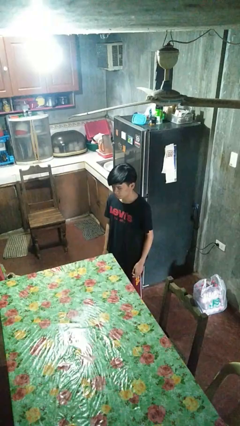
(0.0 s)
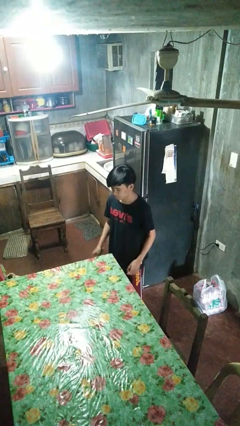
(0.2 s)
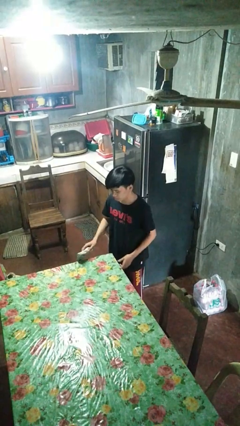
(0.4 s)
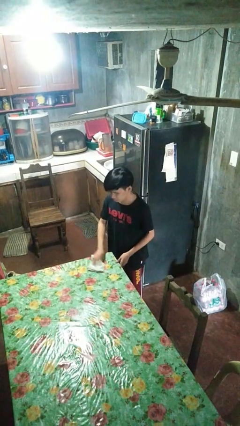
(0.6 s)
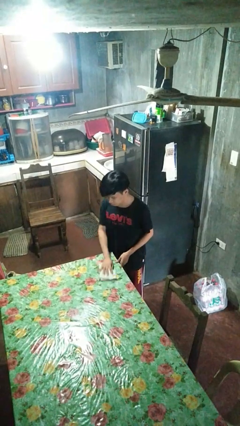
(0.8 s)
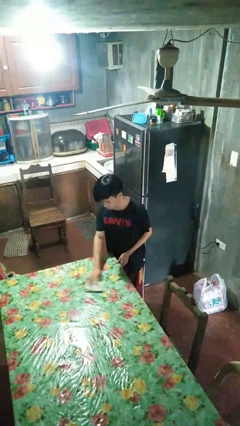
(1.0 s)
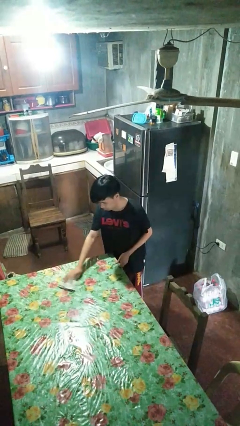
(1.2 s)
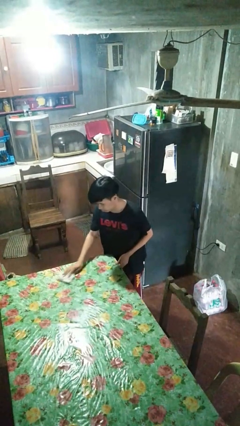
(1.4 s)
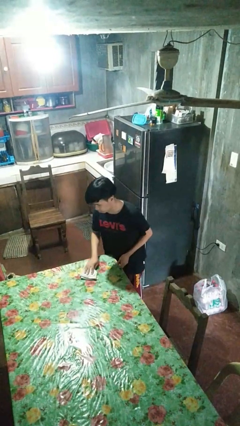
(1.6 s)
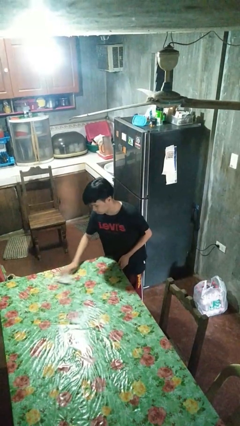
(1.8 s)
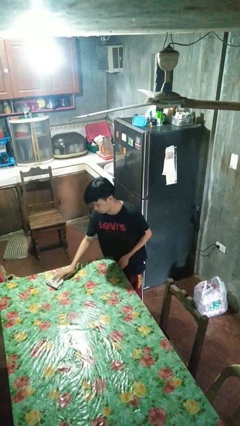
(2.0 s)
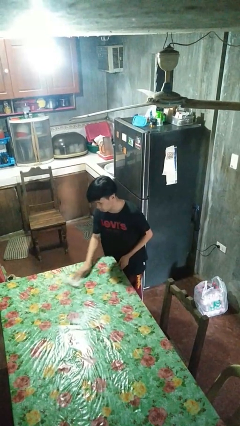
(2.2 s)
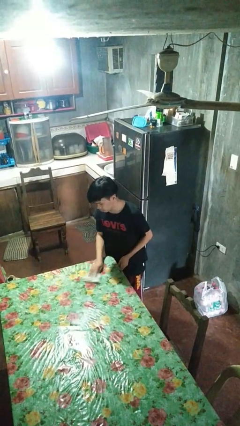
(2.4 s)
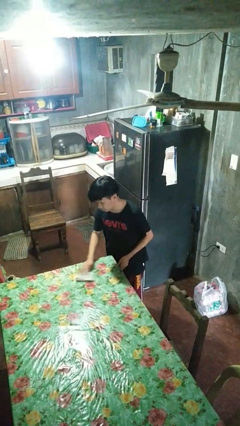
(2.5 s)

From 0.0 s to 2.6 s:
person cleans table with rag

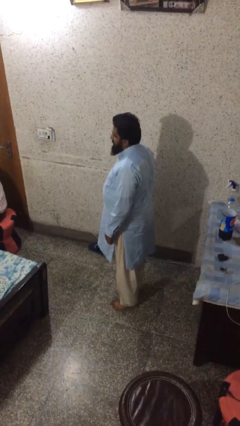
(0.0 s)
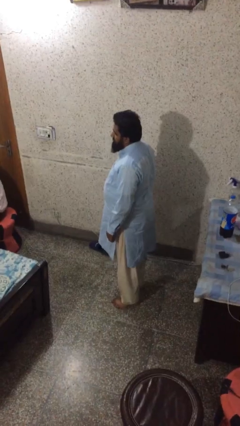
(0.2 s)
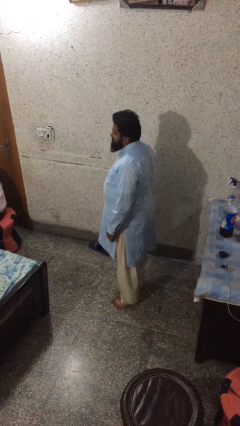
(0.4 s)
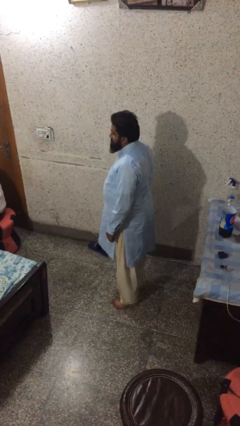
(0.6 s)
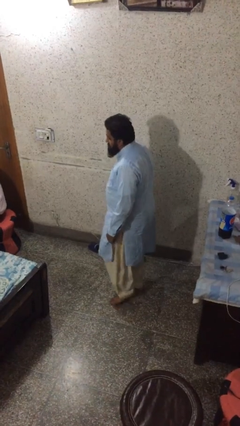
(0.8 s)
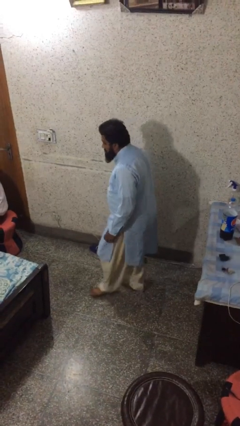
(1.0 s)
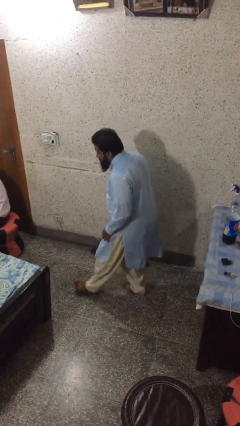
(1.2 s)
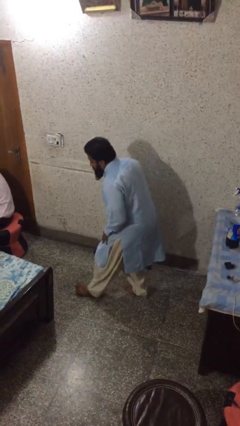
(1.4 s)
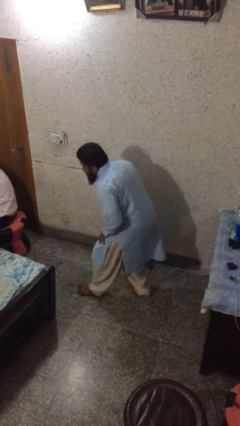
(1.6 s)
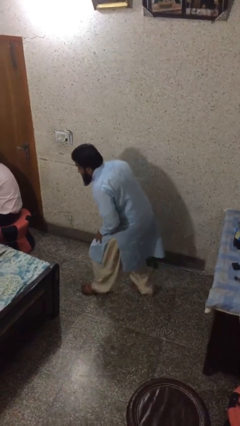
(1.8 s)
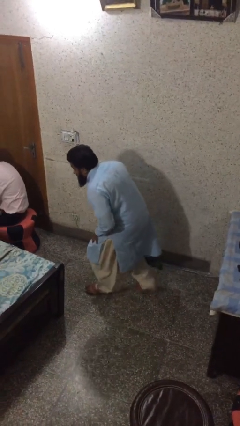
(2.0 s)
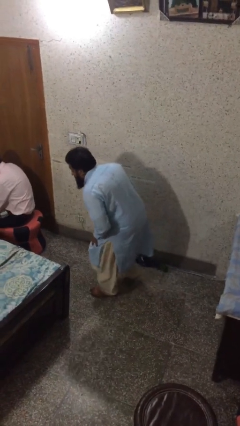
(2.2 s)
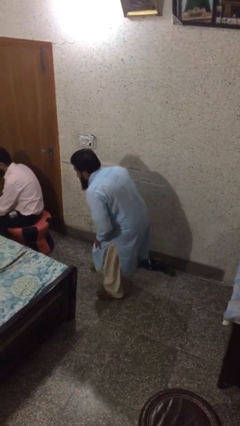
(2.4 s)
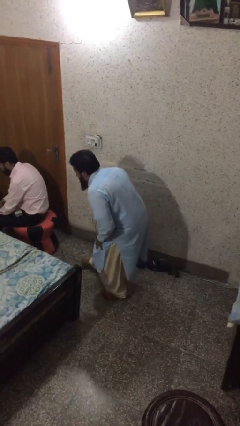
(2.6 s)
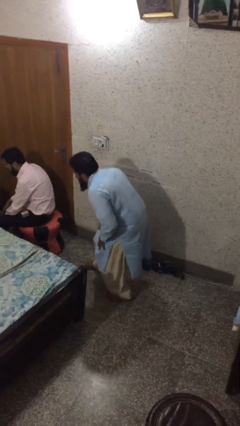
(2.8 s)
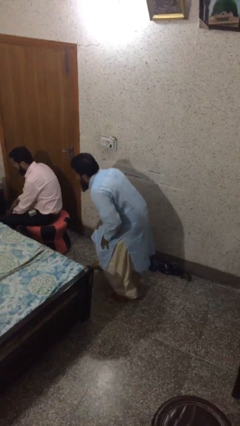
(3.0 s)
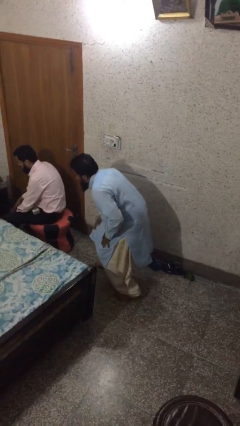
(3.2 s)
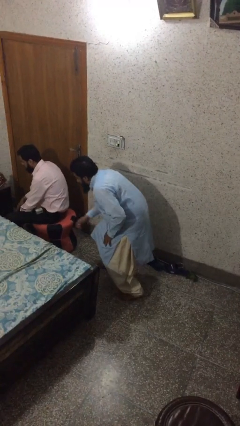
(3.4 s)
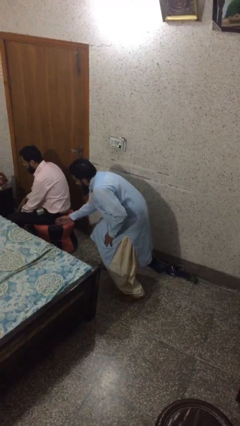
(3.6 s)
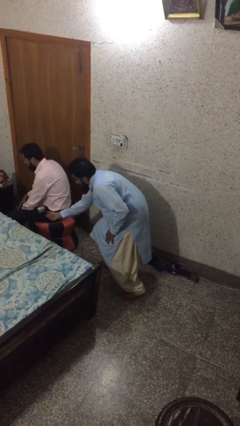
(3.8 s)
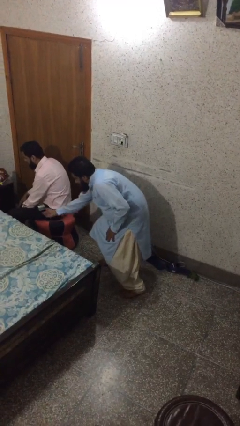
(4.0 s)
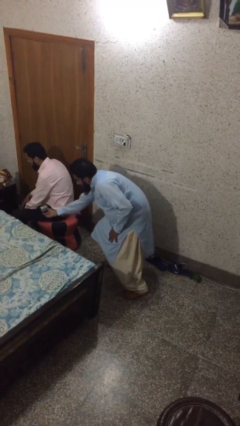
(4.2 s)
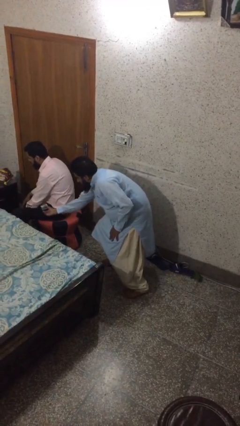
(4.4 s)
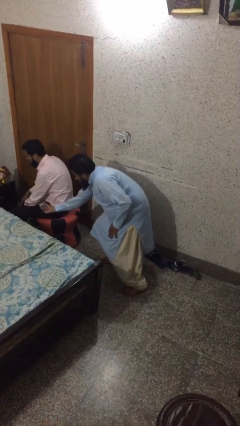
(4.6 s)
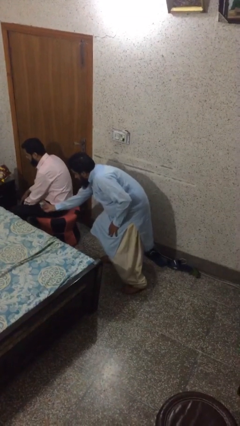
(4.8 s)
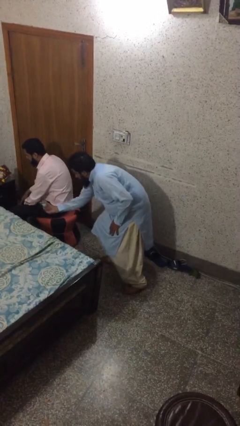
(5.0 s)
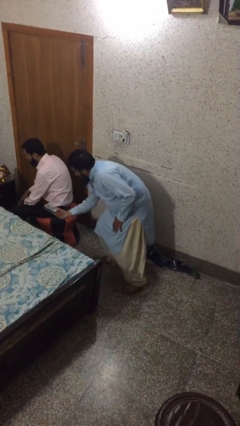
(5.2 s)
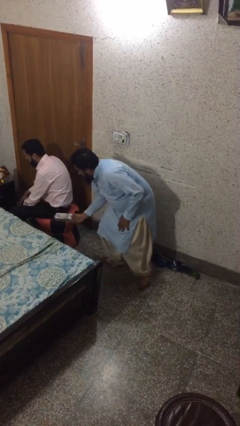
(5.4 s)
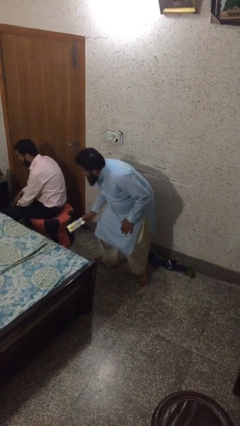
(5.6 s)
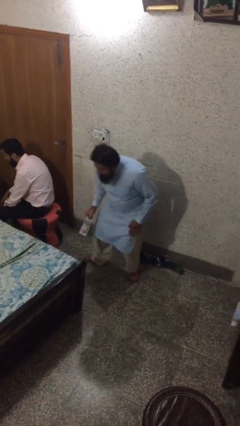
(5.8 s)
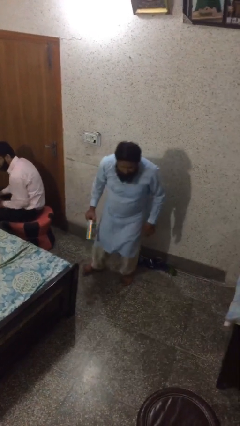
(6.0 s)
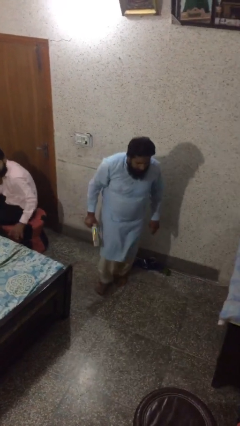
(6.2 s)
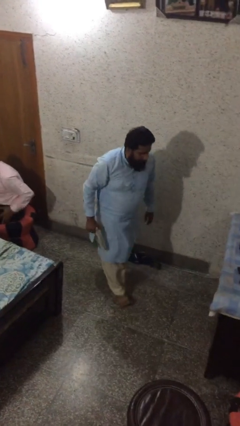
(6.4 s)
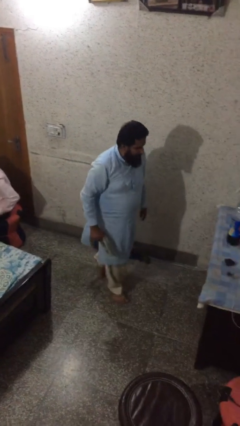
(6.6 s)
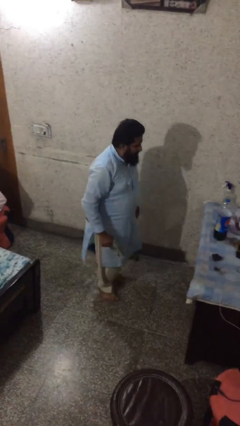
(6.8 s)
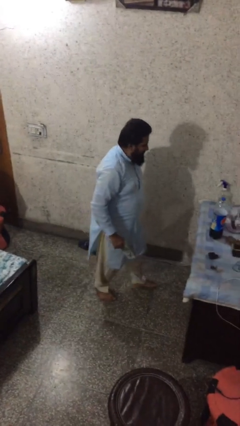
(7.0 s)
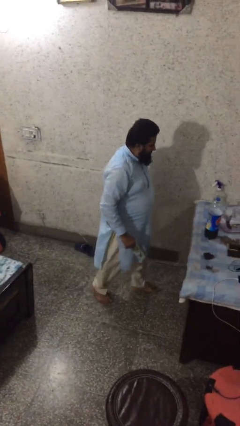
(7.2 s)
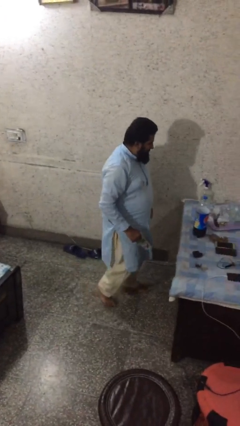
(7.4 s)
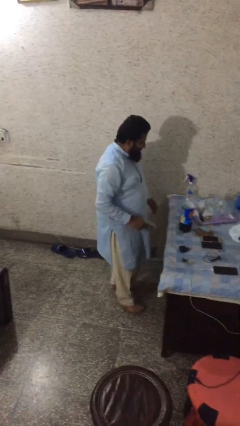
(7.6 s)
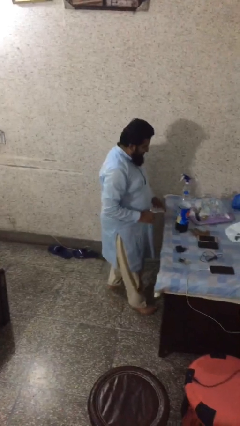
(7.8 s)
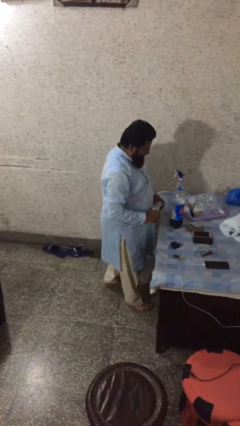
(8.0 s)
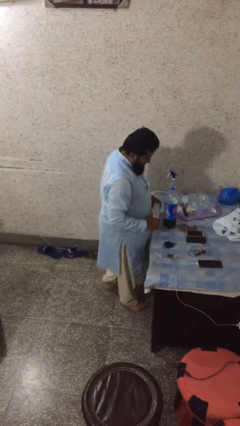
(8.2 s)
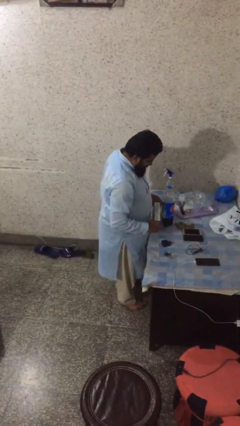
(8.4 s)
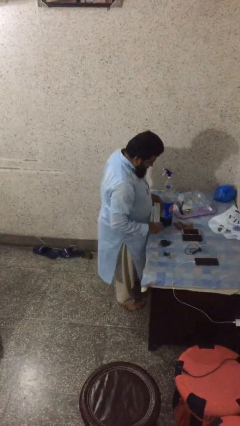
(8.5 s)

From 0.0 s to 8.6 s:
person steals object from person

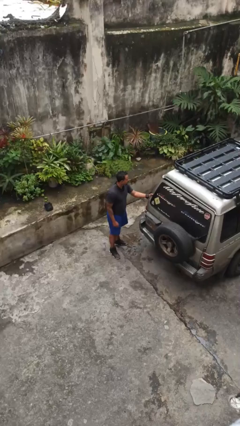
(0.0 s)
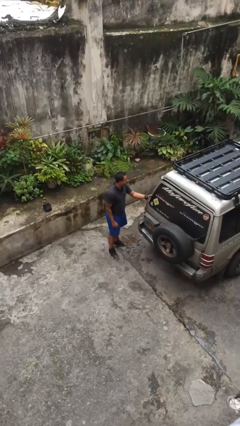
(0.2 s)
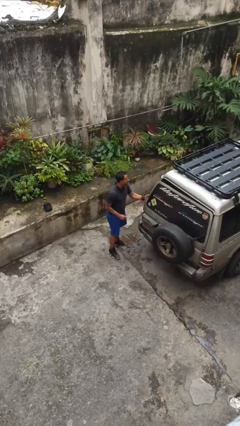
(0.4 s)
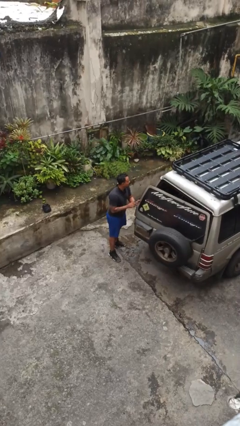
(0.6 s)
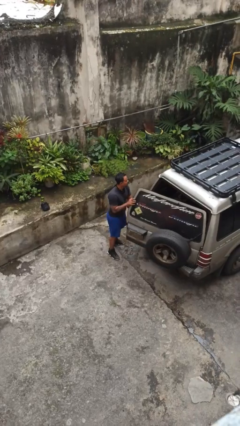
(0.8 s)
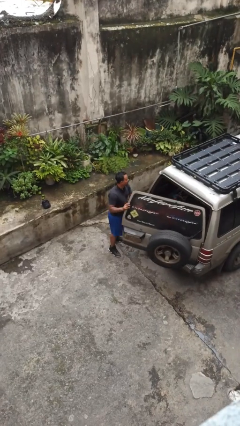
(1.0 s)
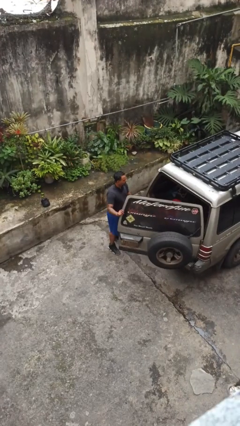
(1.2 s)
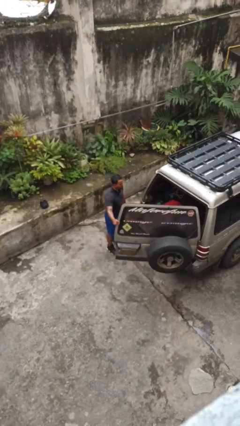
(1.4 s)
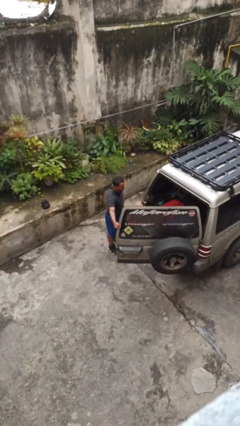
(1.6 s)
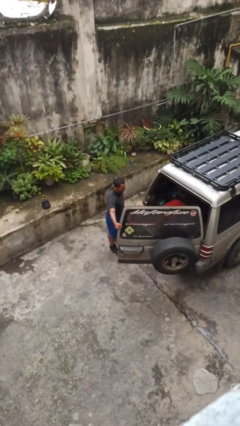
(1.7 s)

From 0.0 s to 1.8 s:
person opens car trunk

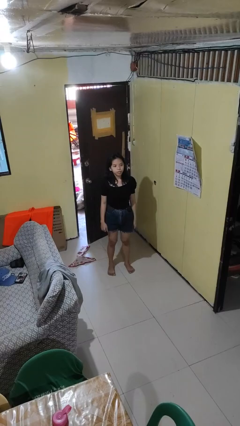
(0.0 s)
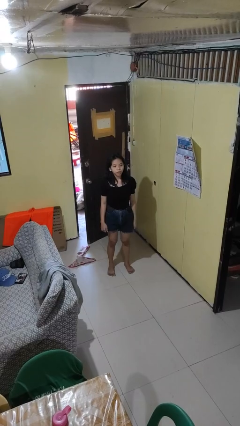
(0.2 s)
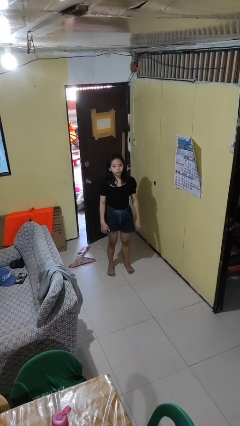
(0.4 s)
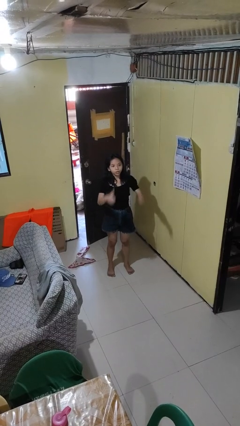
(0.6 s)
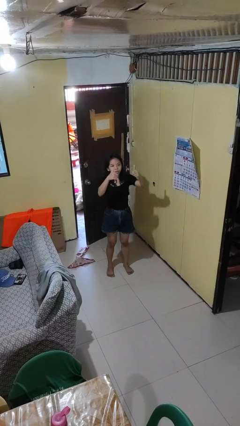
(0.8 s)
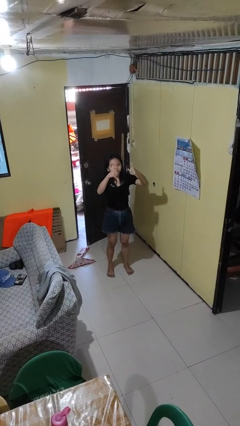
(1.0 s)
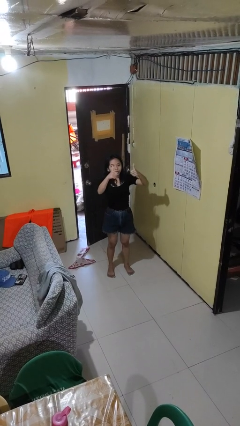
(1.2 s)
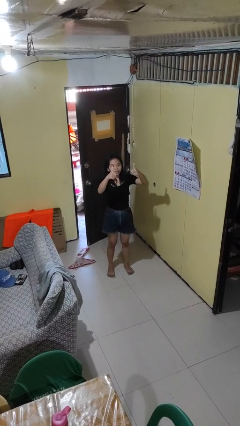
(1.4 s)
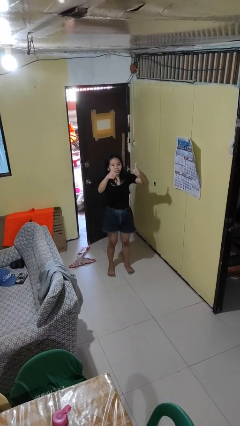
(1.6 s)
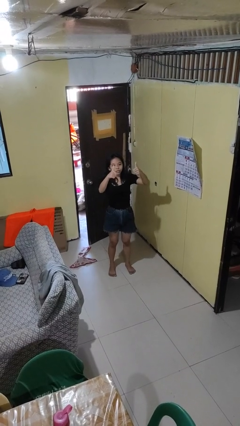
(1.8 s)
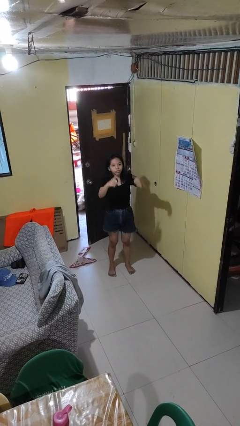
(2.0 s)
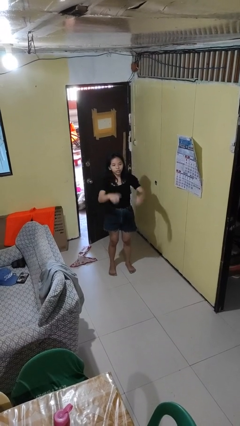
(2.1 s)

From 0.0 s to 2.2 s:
person gestures thumbs up

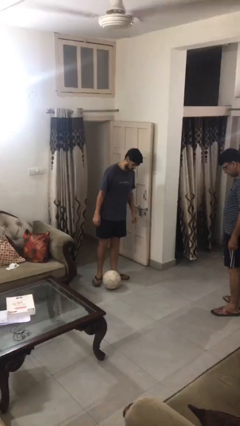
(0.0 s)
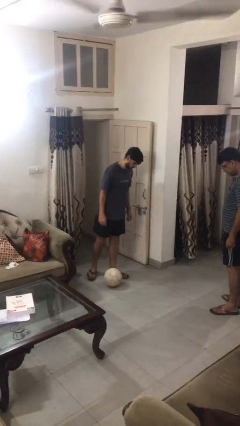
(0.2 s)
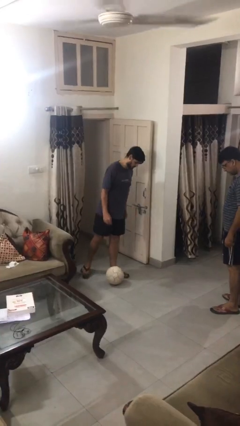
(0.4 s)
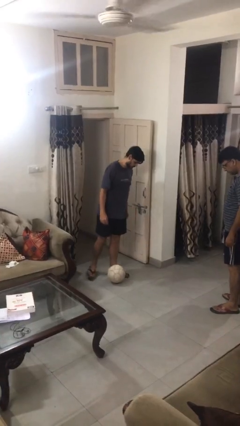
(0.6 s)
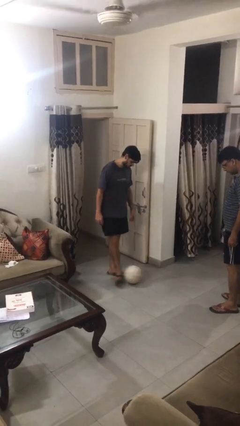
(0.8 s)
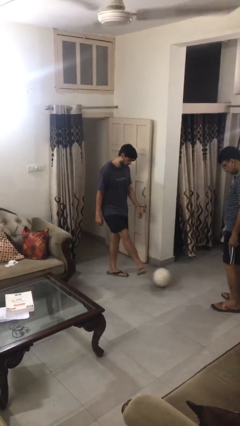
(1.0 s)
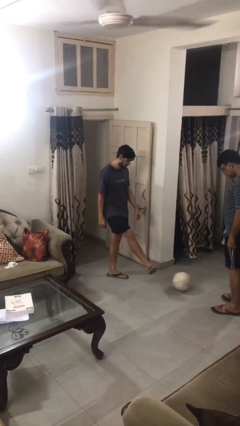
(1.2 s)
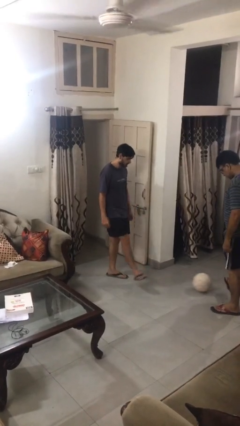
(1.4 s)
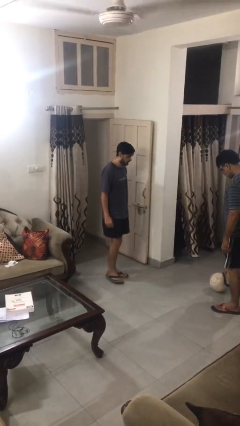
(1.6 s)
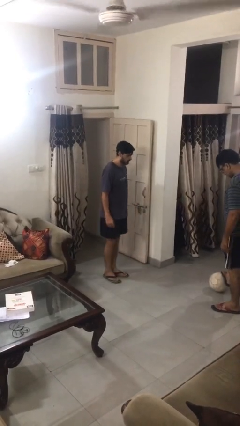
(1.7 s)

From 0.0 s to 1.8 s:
person kicks object to person

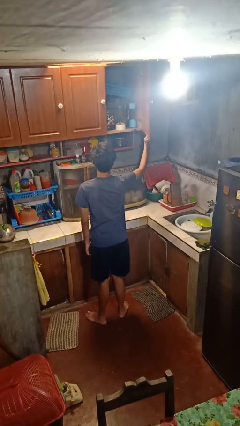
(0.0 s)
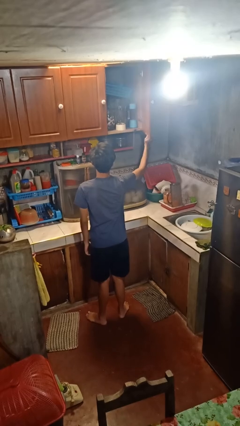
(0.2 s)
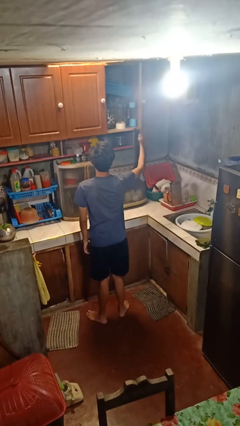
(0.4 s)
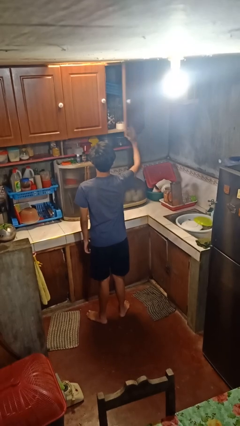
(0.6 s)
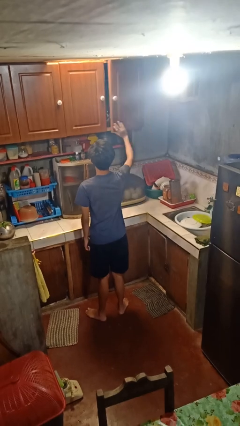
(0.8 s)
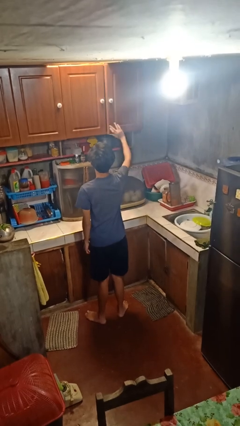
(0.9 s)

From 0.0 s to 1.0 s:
person closes cabinet
